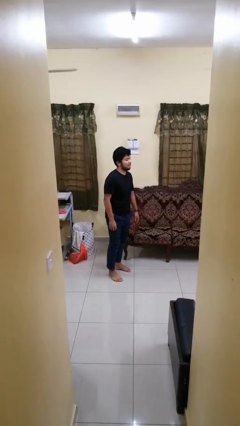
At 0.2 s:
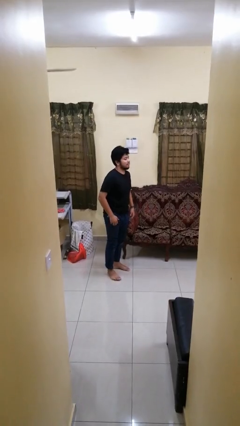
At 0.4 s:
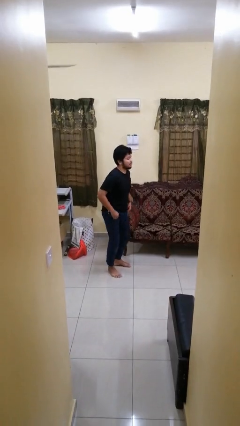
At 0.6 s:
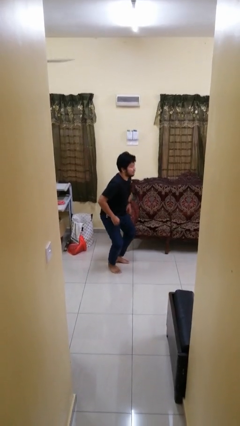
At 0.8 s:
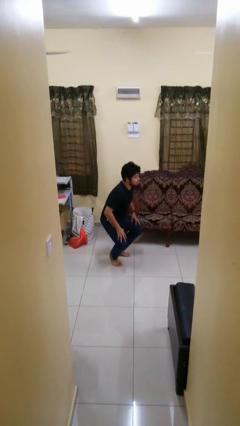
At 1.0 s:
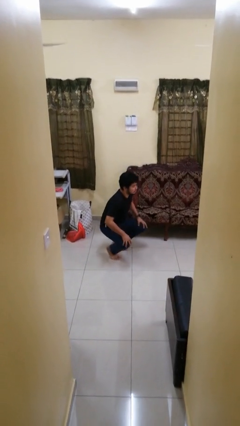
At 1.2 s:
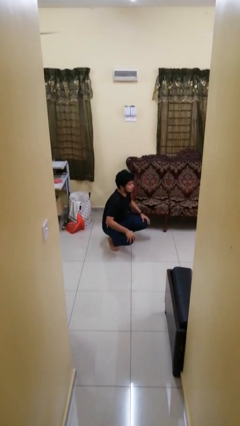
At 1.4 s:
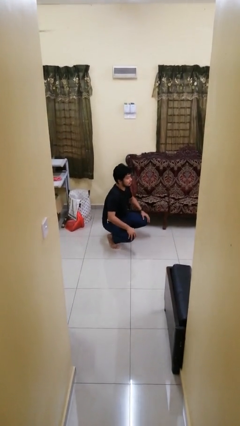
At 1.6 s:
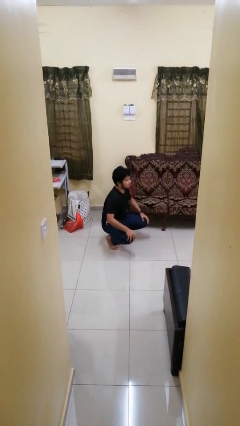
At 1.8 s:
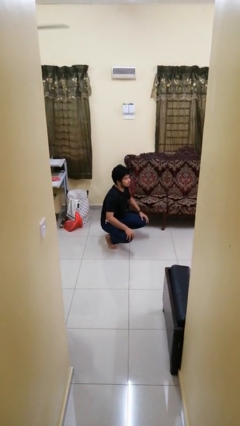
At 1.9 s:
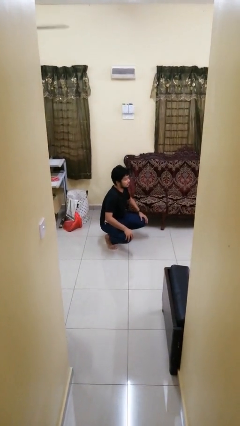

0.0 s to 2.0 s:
person squats

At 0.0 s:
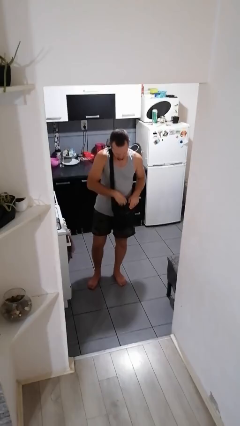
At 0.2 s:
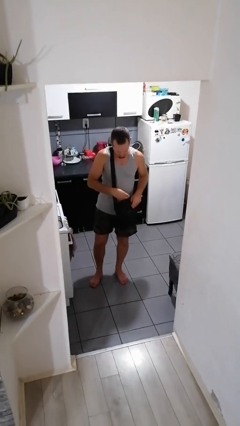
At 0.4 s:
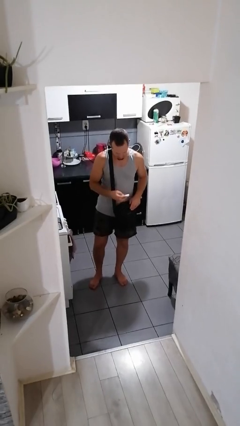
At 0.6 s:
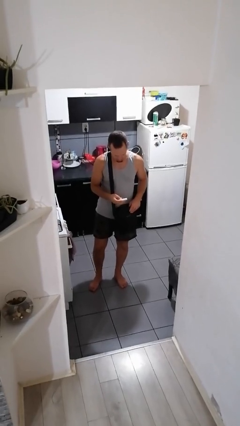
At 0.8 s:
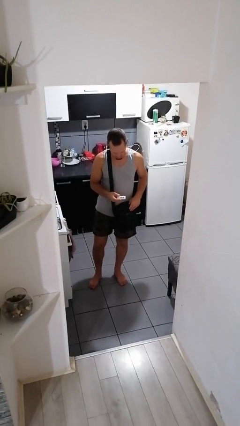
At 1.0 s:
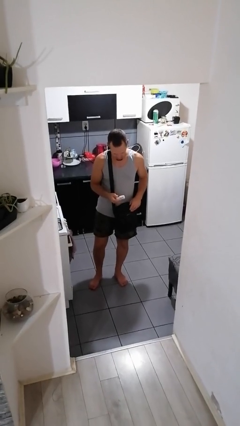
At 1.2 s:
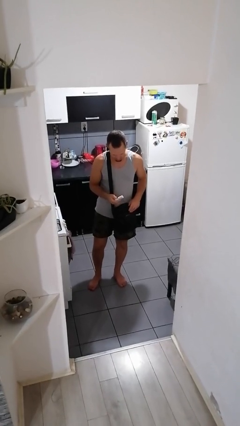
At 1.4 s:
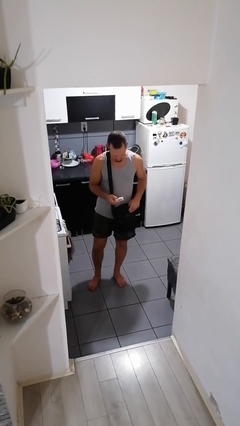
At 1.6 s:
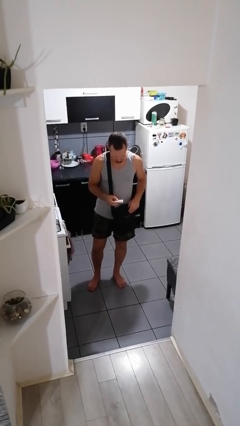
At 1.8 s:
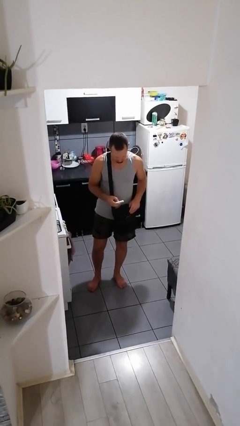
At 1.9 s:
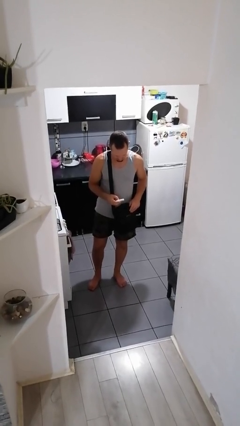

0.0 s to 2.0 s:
person takes object from purse

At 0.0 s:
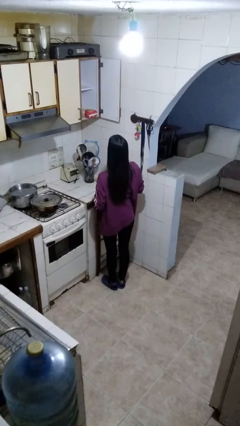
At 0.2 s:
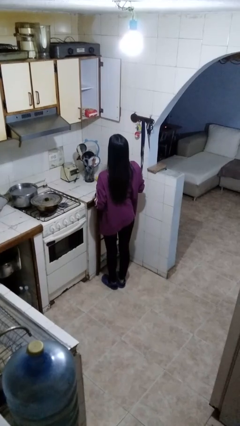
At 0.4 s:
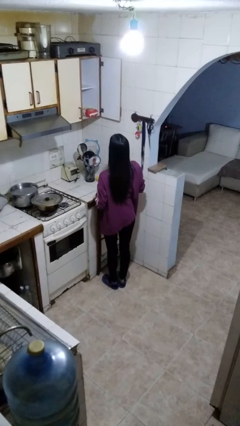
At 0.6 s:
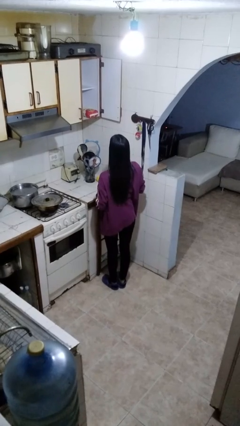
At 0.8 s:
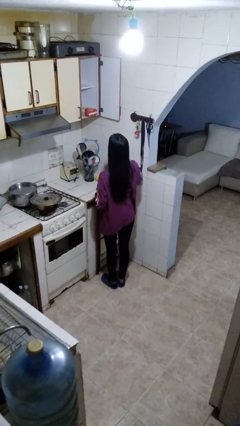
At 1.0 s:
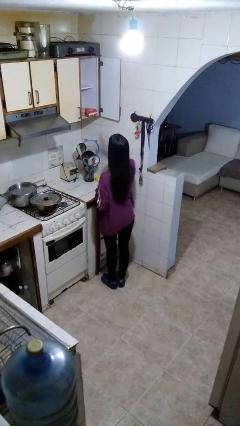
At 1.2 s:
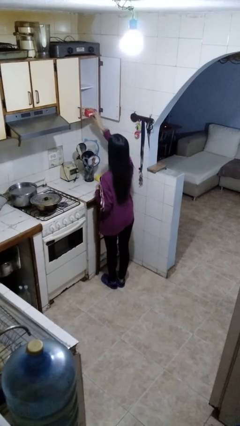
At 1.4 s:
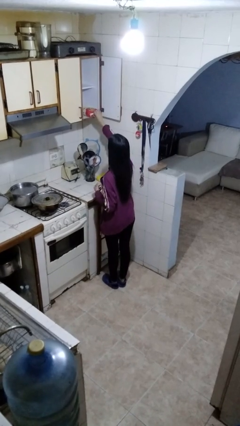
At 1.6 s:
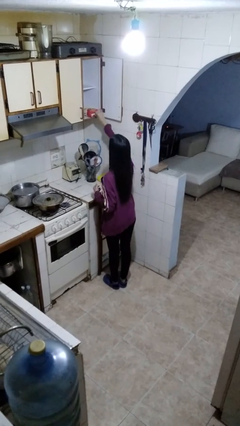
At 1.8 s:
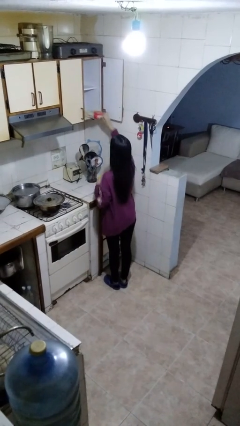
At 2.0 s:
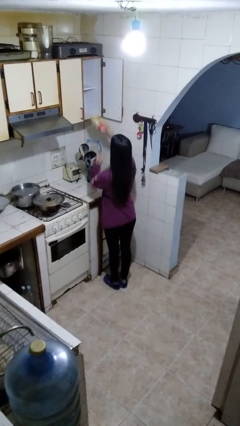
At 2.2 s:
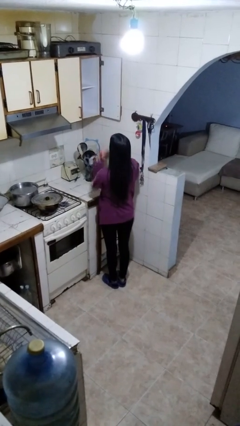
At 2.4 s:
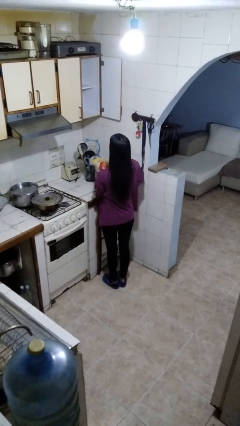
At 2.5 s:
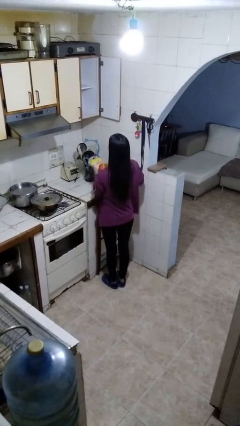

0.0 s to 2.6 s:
person puts down object into cabinet

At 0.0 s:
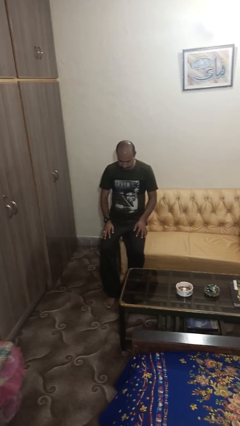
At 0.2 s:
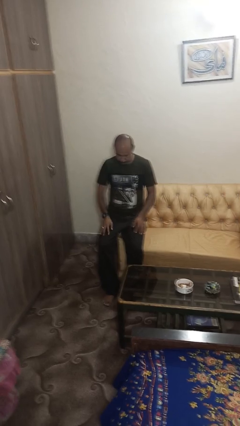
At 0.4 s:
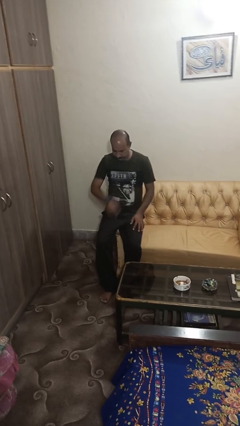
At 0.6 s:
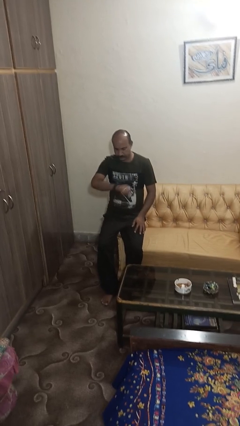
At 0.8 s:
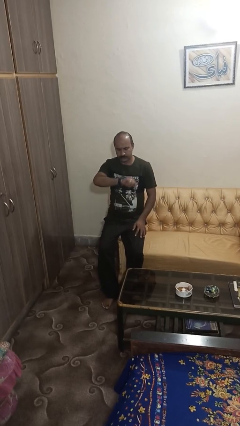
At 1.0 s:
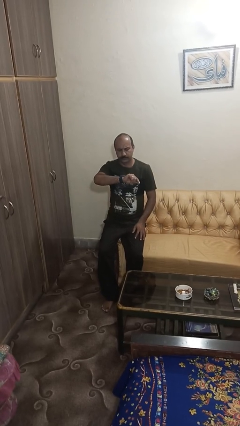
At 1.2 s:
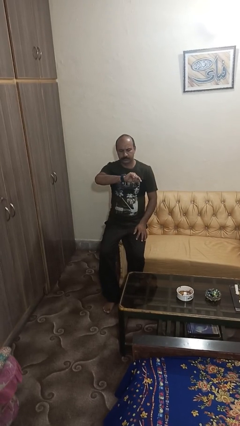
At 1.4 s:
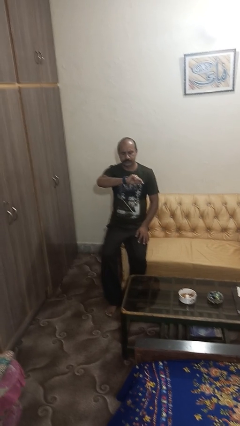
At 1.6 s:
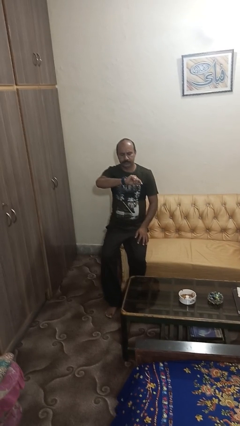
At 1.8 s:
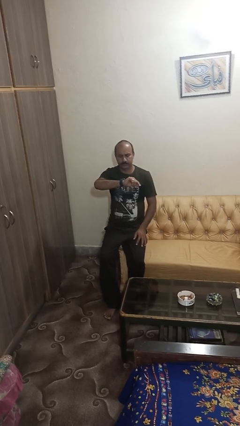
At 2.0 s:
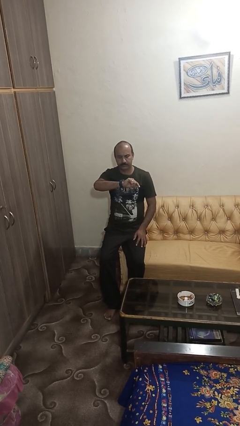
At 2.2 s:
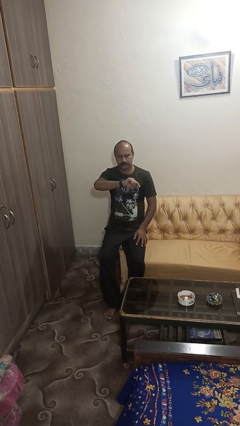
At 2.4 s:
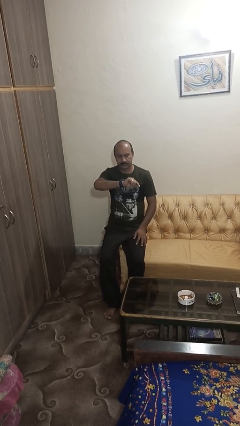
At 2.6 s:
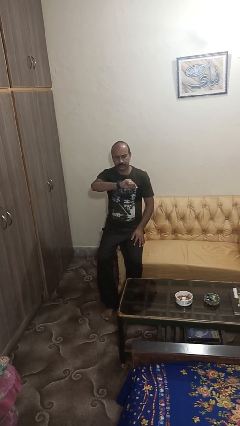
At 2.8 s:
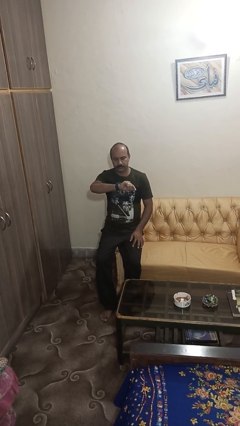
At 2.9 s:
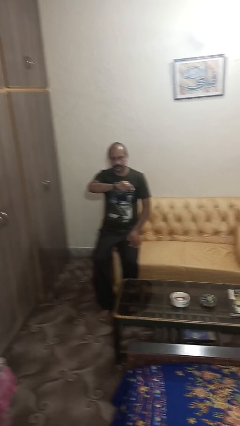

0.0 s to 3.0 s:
person looks at wristwatch

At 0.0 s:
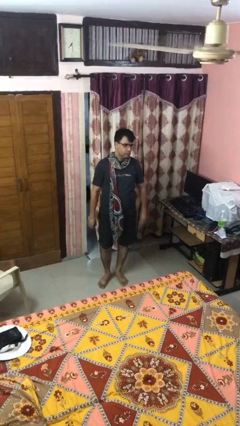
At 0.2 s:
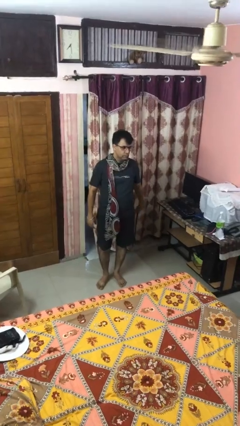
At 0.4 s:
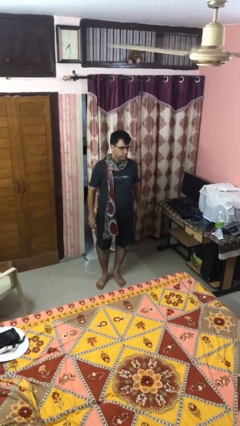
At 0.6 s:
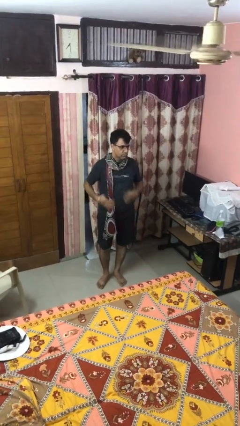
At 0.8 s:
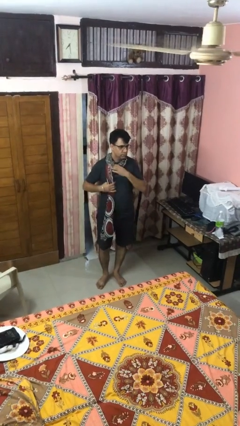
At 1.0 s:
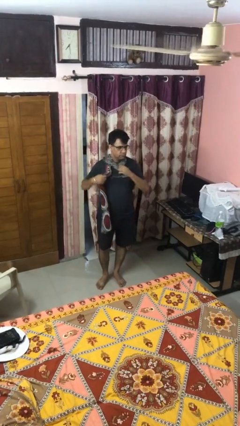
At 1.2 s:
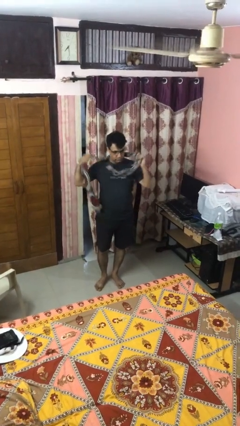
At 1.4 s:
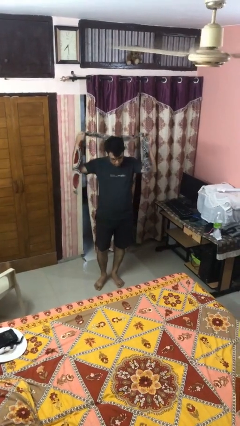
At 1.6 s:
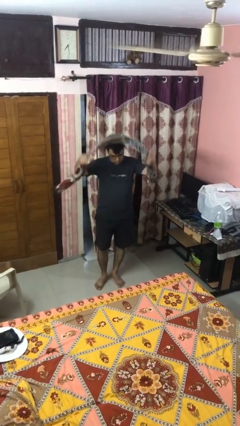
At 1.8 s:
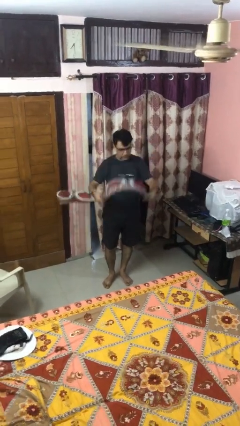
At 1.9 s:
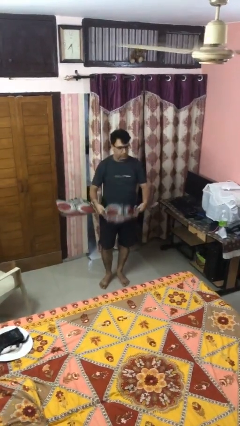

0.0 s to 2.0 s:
person takes off scarf

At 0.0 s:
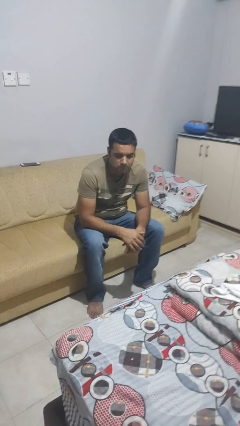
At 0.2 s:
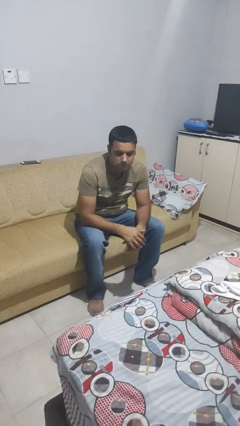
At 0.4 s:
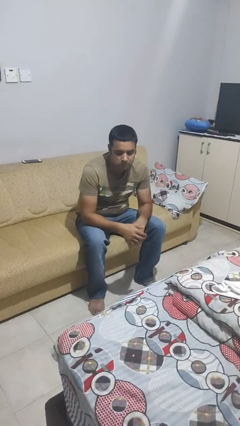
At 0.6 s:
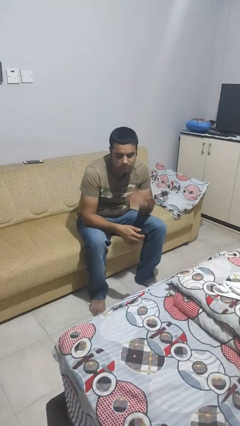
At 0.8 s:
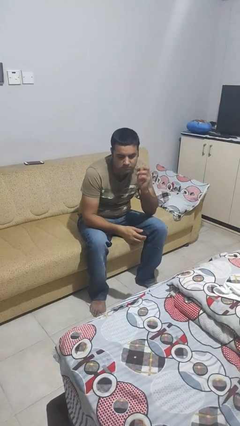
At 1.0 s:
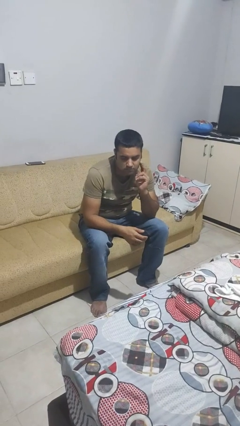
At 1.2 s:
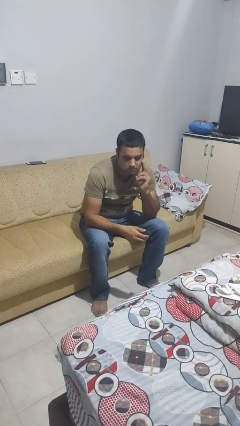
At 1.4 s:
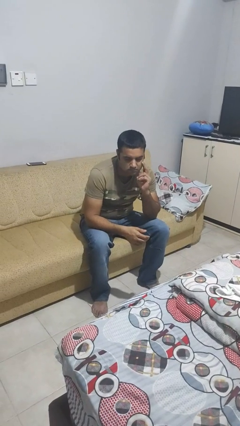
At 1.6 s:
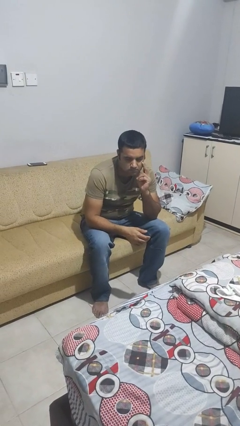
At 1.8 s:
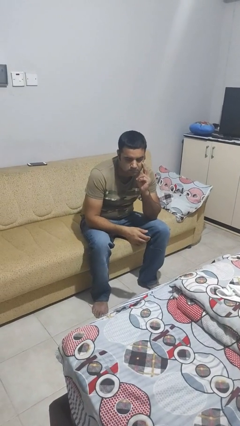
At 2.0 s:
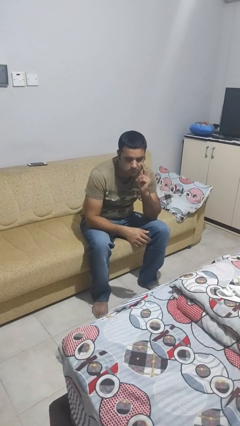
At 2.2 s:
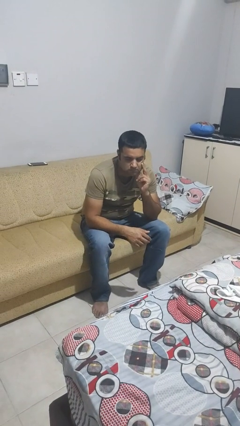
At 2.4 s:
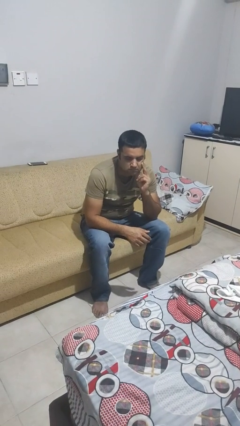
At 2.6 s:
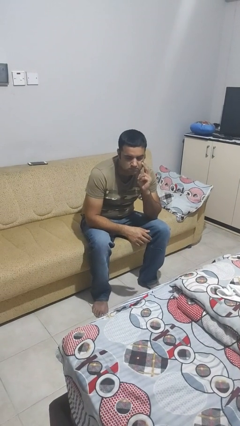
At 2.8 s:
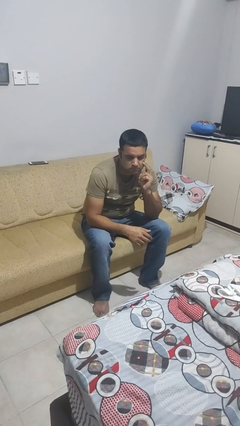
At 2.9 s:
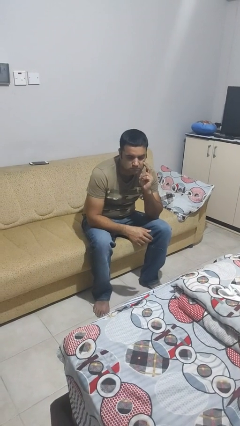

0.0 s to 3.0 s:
person strokes chin

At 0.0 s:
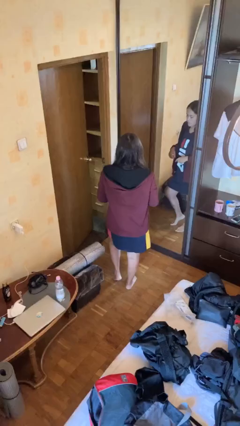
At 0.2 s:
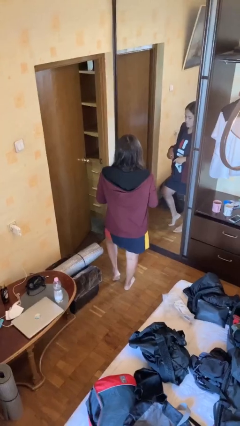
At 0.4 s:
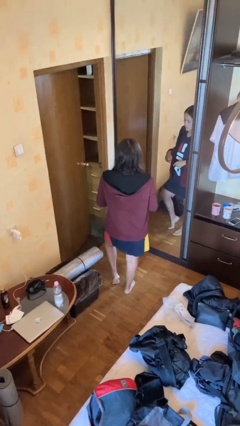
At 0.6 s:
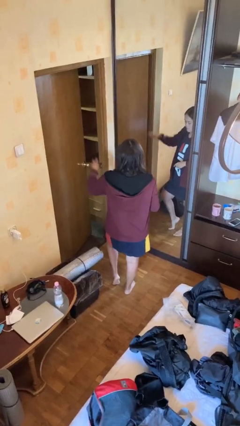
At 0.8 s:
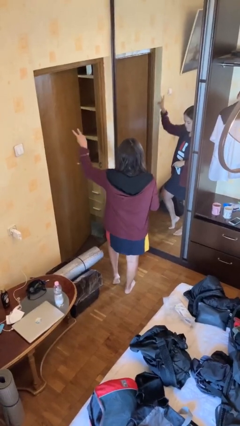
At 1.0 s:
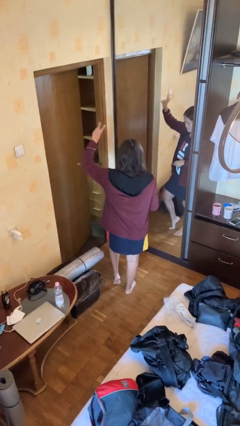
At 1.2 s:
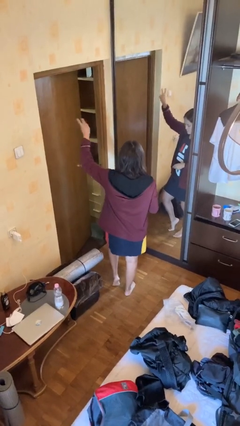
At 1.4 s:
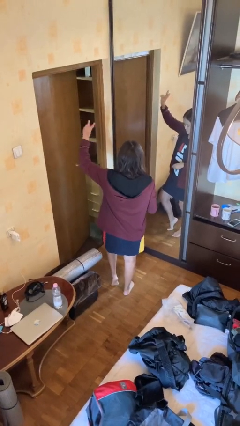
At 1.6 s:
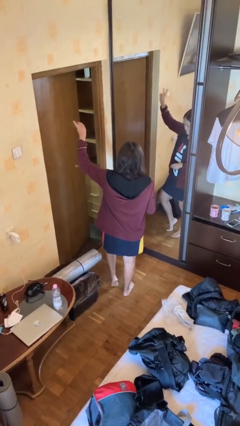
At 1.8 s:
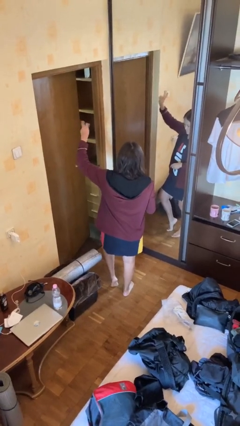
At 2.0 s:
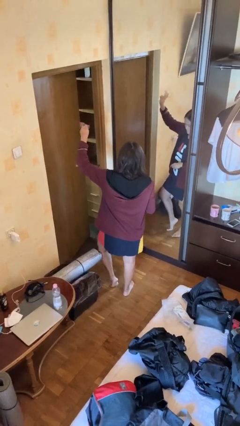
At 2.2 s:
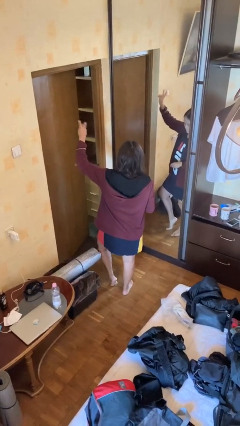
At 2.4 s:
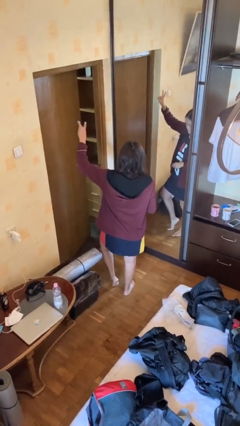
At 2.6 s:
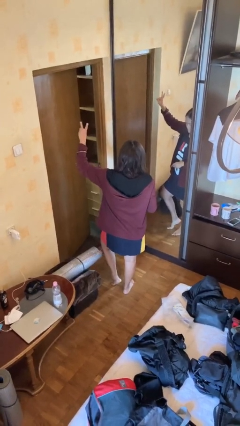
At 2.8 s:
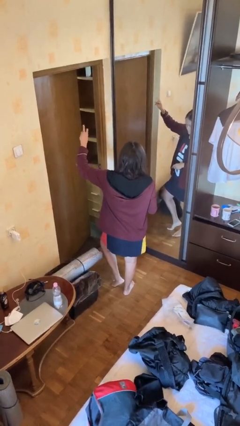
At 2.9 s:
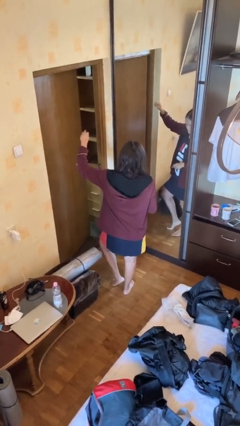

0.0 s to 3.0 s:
person gestures peace
